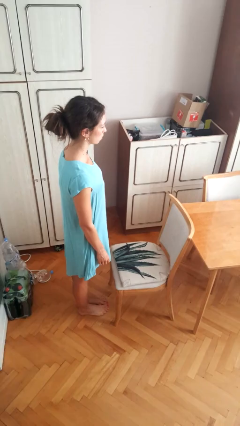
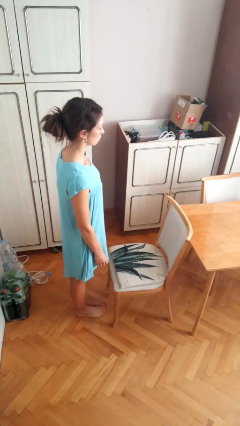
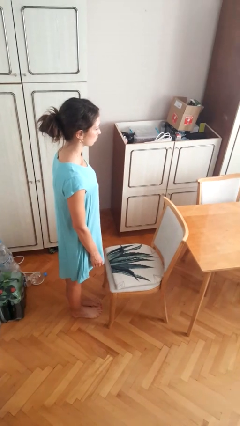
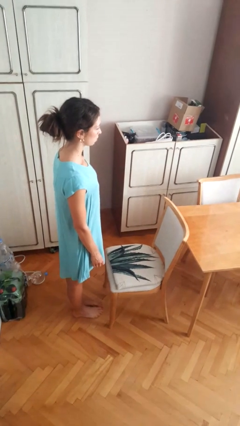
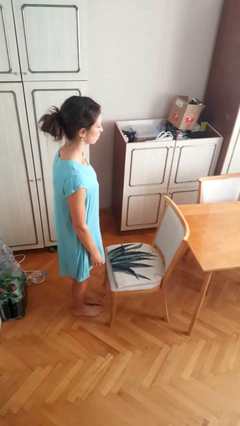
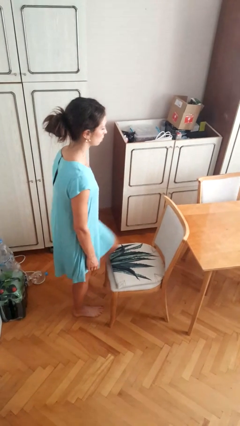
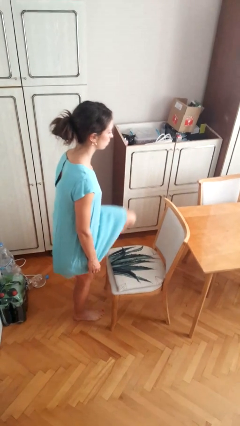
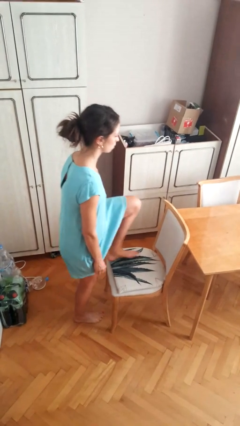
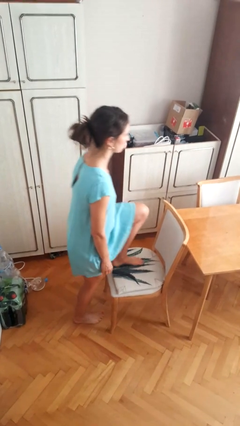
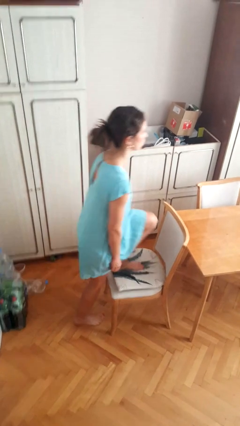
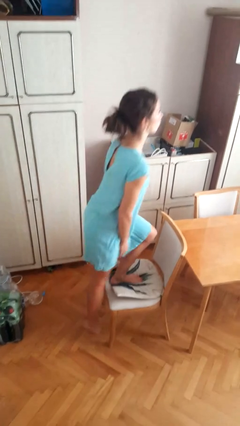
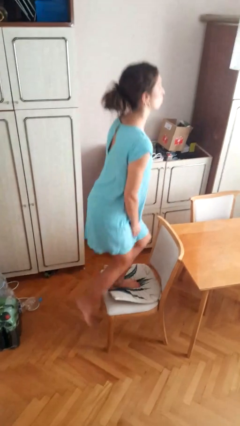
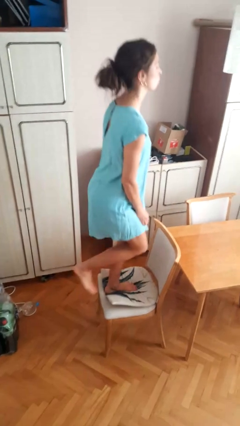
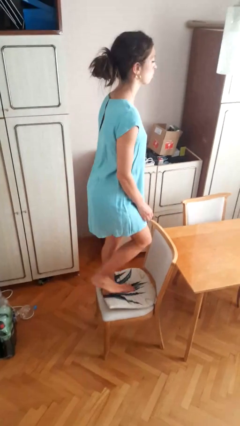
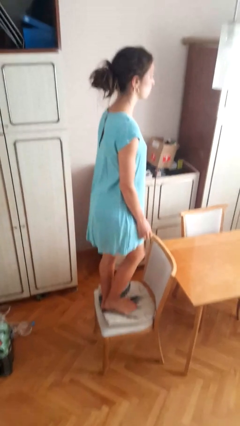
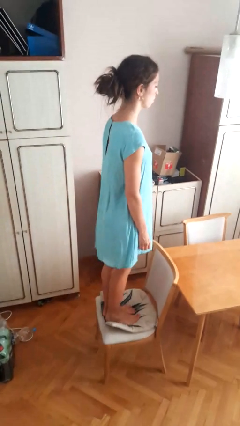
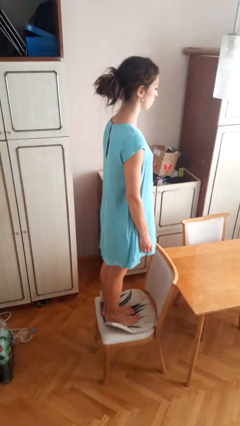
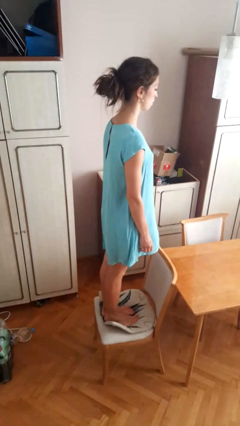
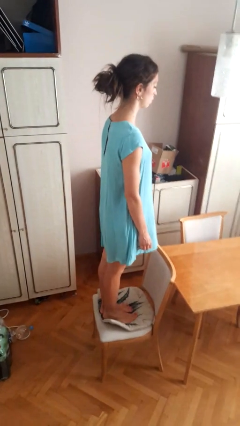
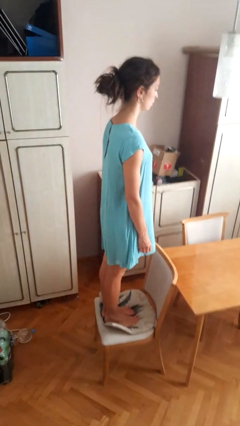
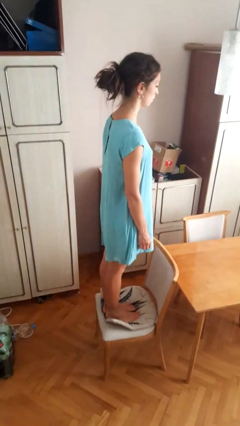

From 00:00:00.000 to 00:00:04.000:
person climbs on chair

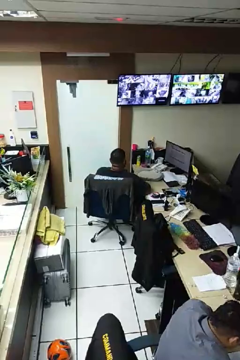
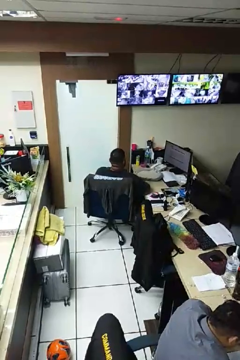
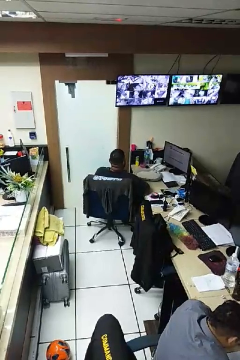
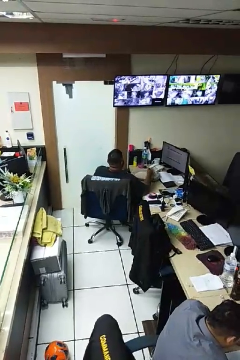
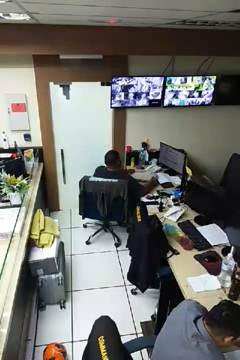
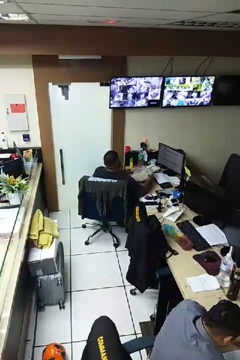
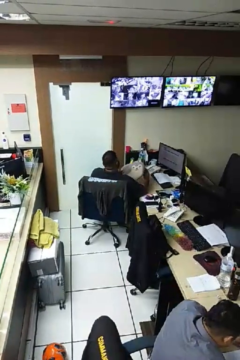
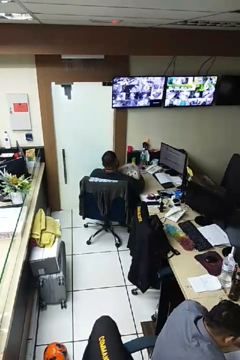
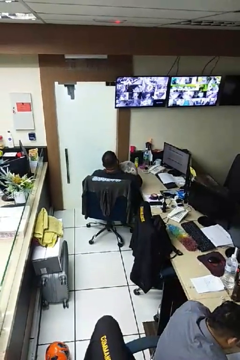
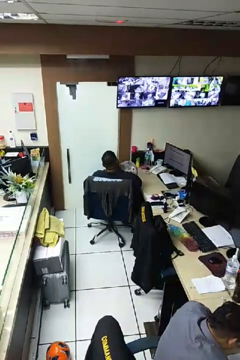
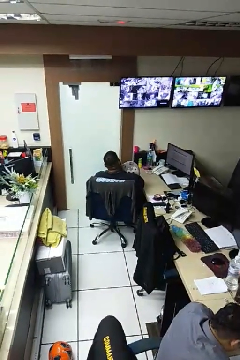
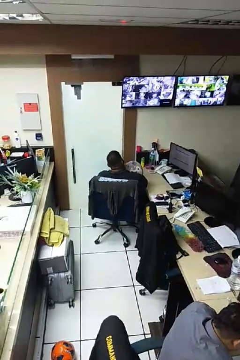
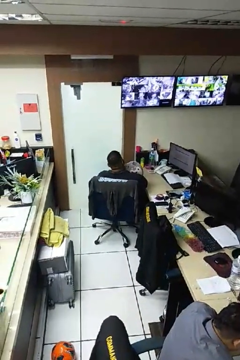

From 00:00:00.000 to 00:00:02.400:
person hugs stuffed animal

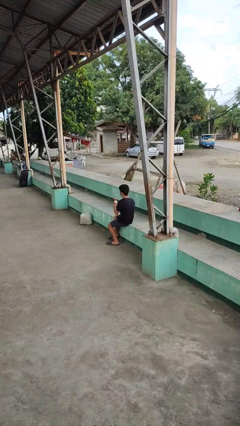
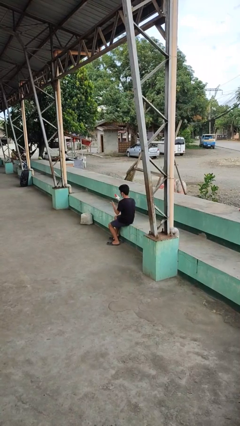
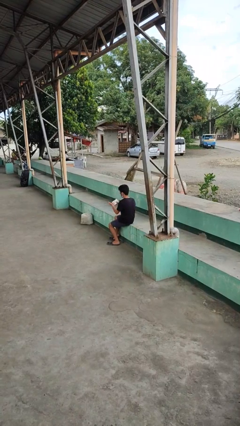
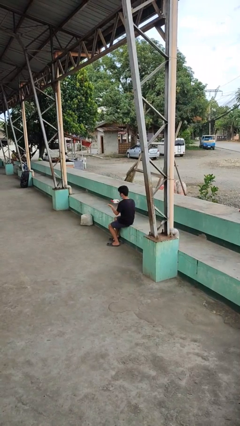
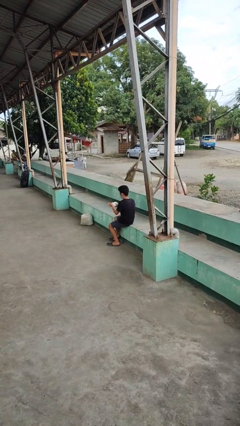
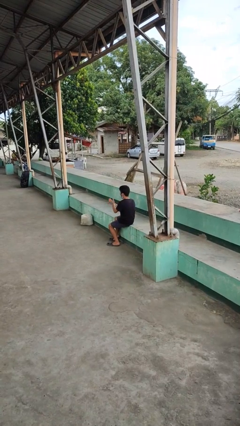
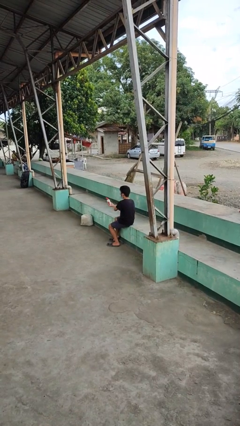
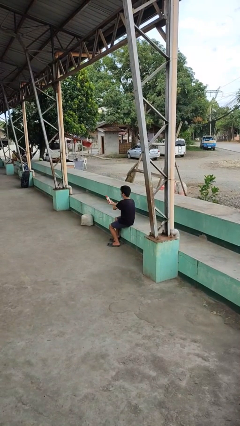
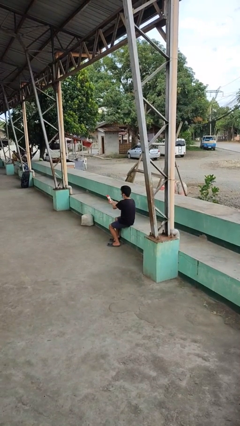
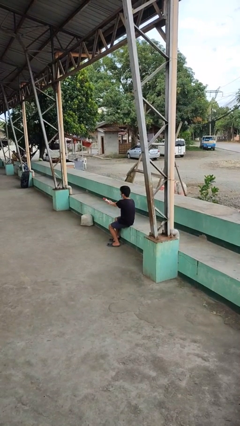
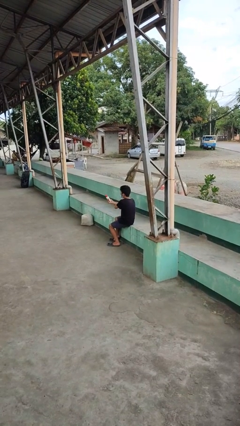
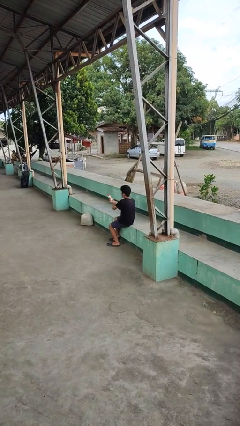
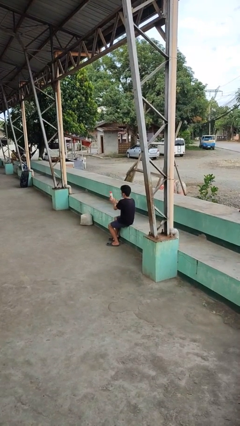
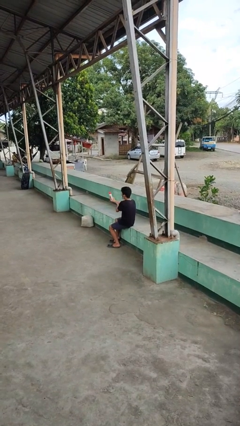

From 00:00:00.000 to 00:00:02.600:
person applies sunscreen

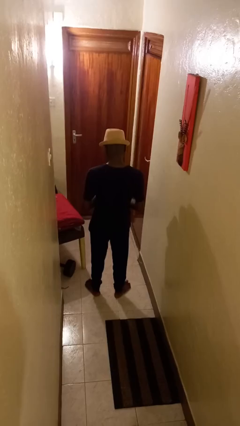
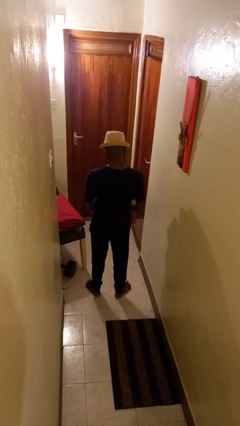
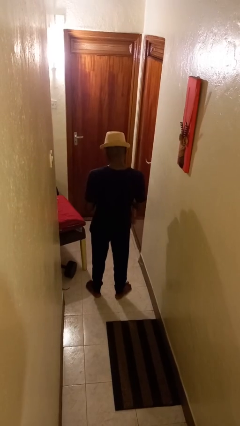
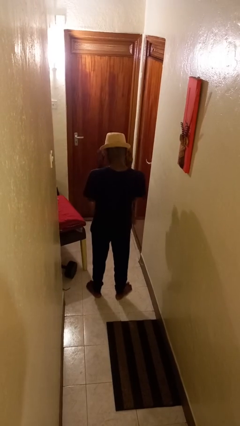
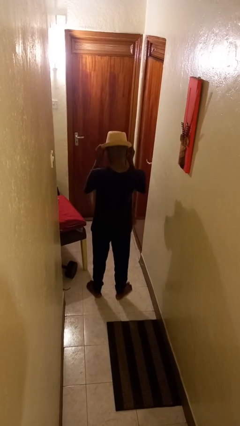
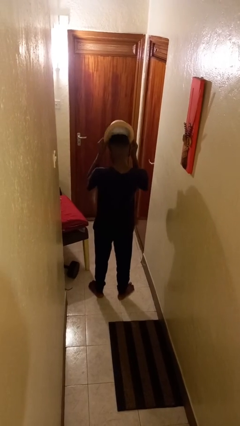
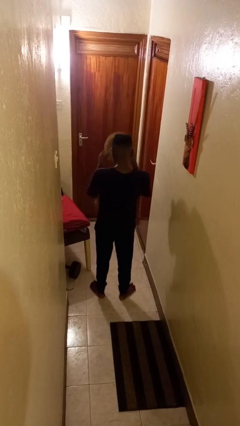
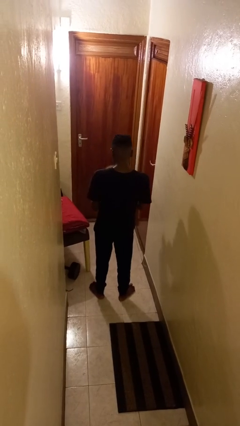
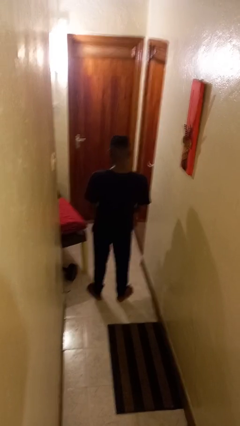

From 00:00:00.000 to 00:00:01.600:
person takes off hat

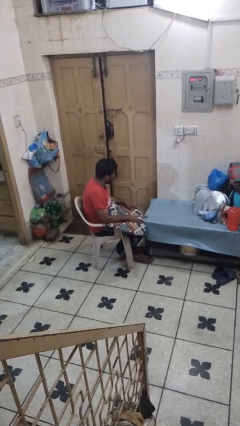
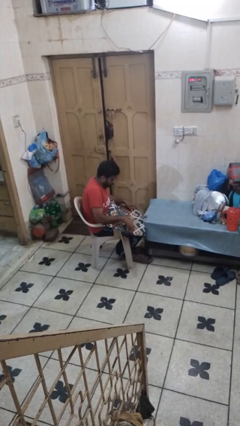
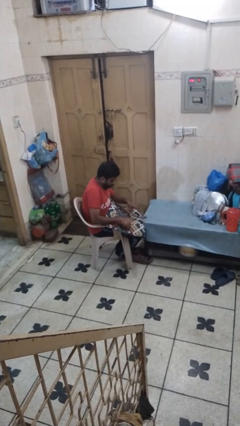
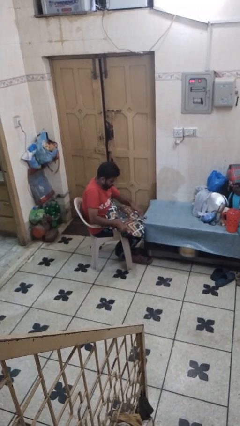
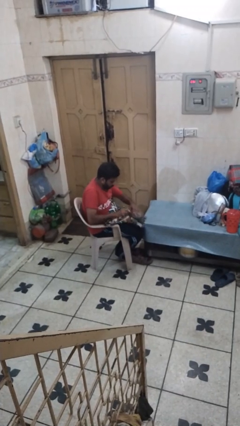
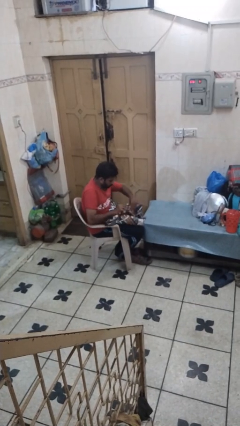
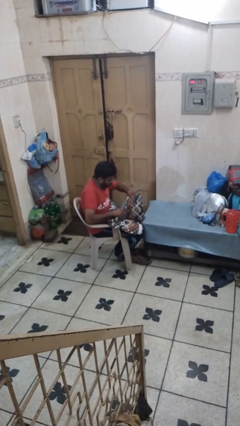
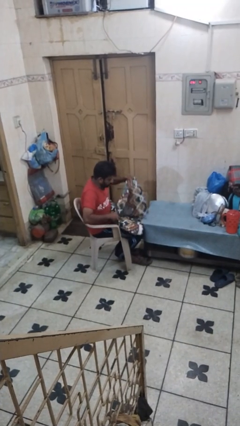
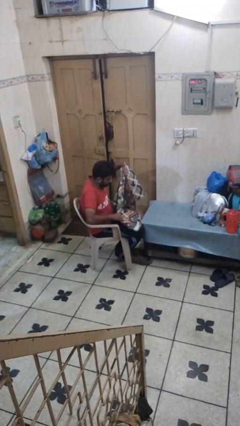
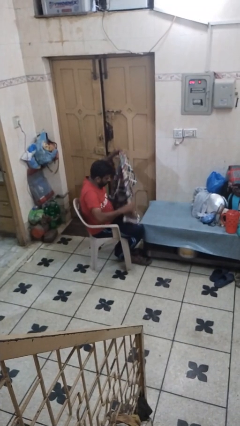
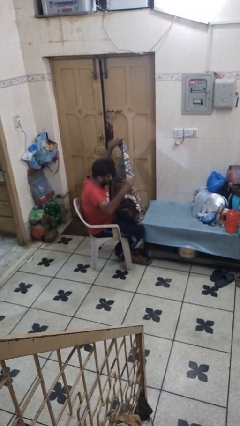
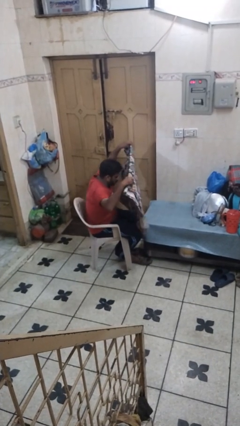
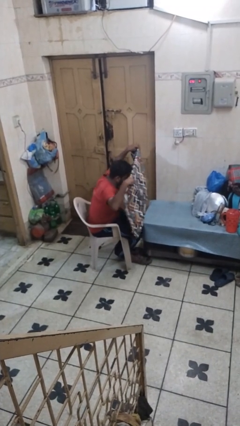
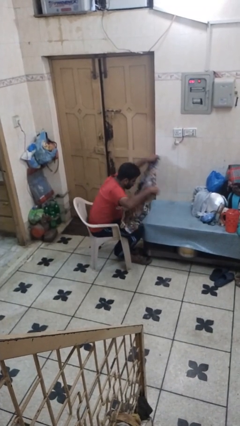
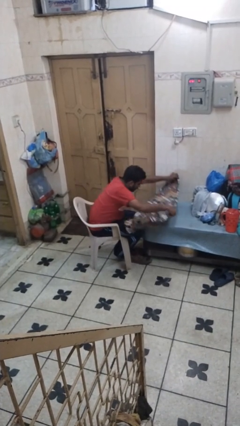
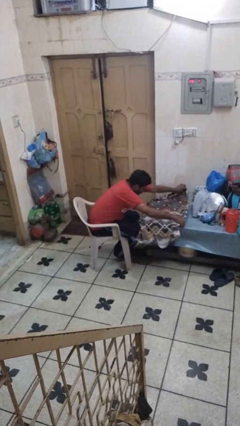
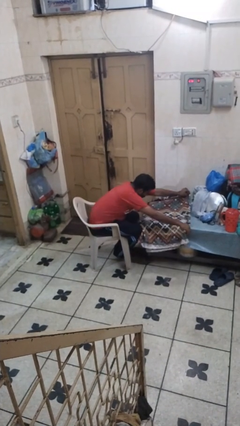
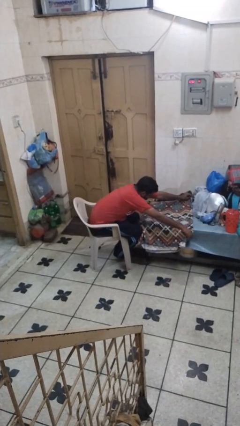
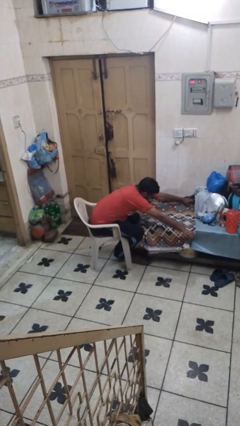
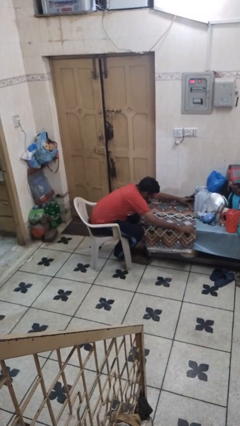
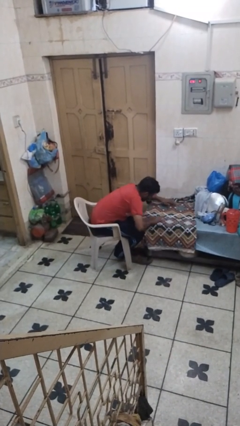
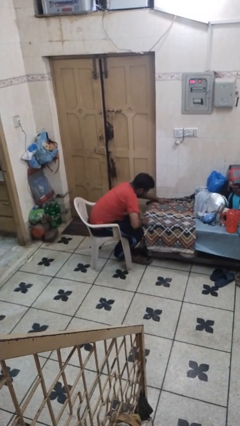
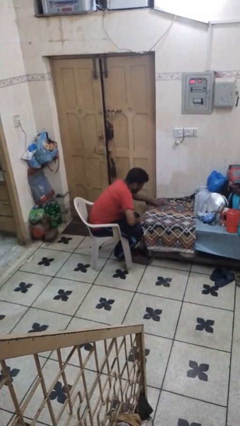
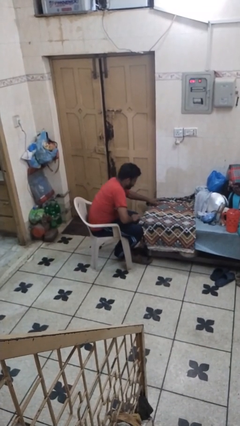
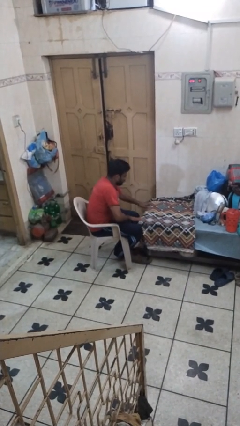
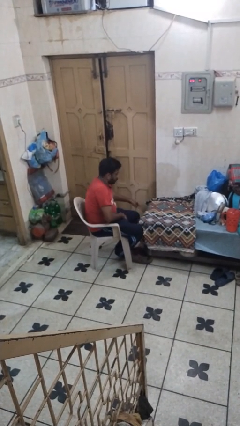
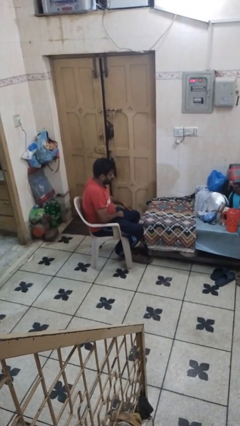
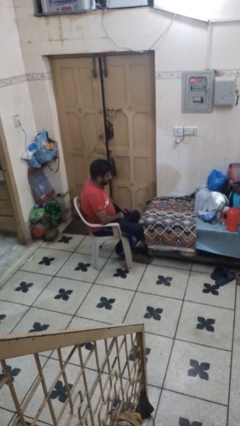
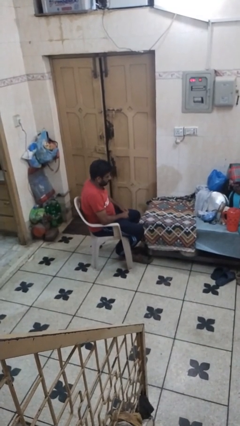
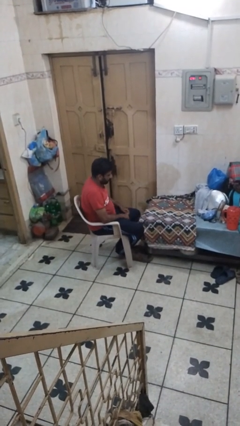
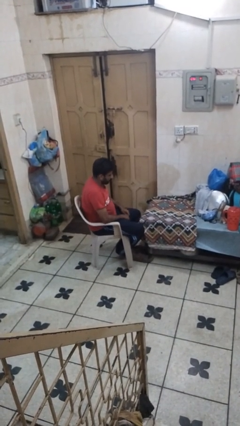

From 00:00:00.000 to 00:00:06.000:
person spreads tablecloth

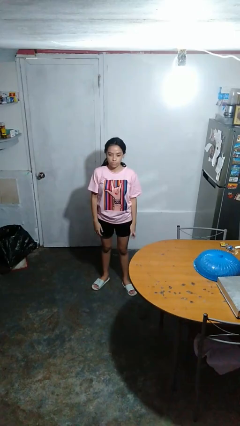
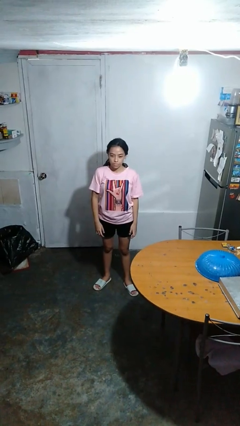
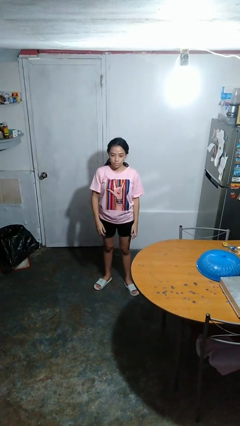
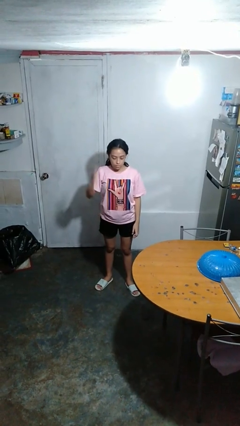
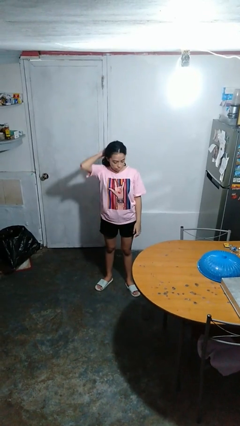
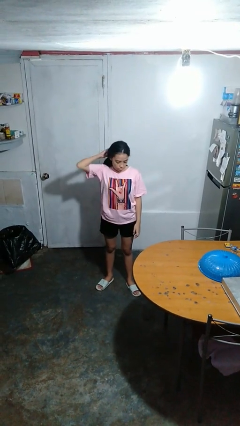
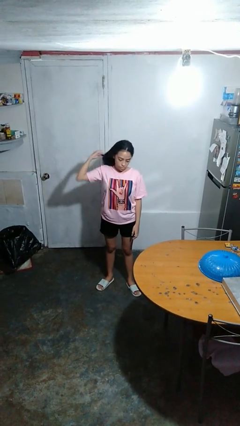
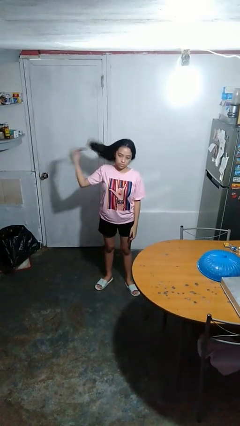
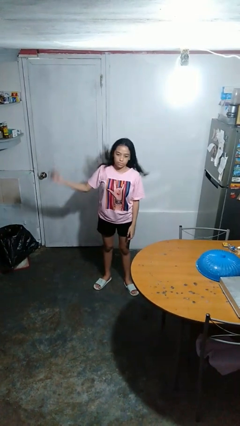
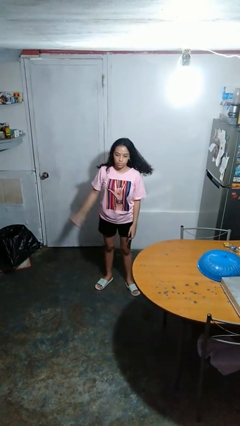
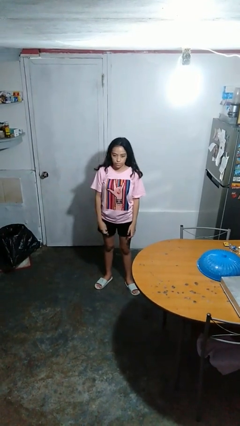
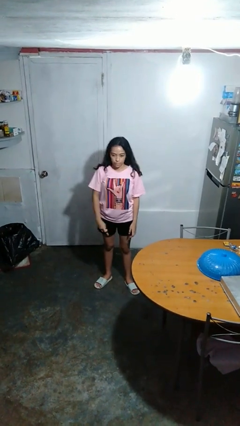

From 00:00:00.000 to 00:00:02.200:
person takes off hairtie
